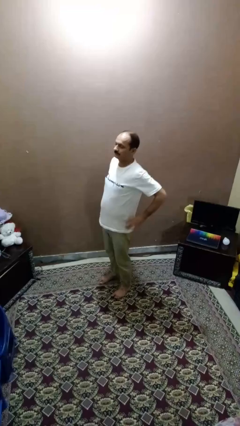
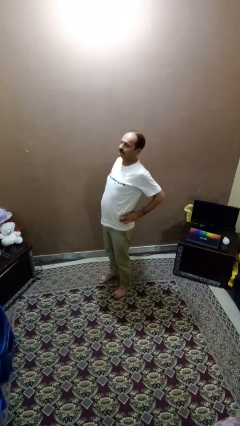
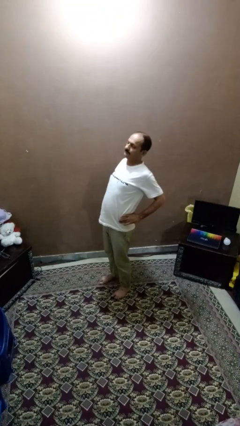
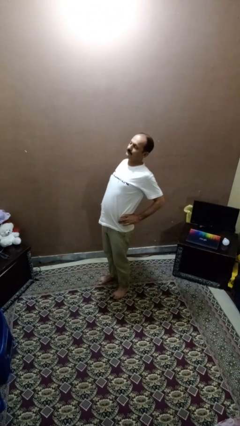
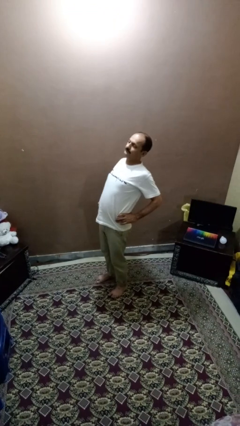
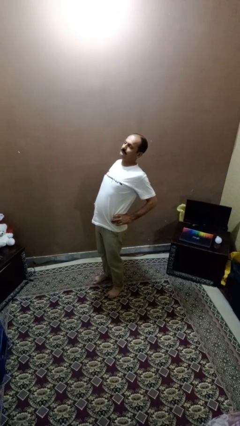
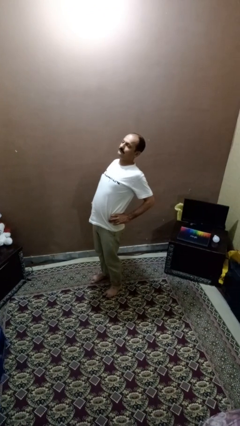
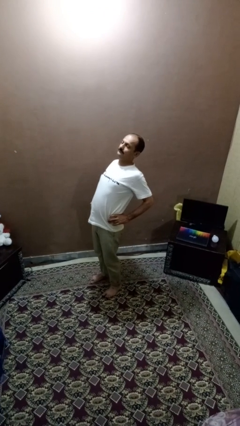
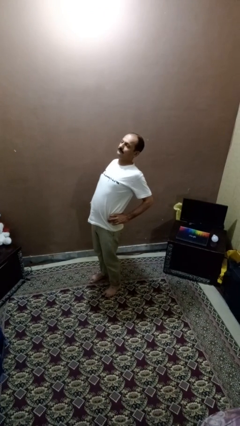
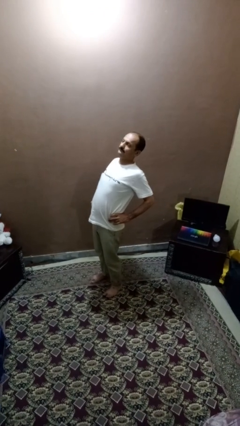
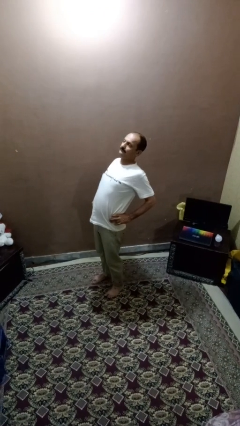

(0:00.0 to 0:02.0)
person stretches back

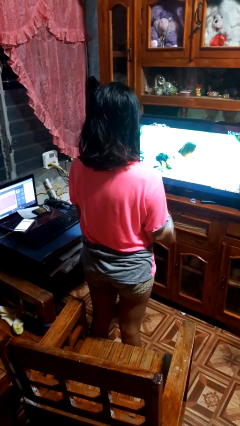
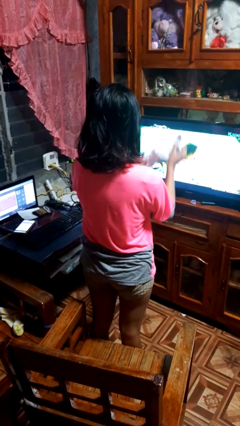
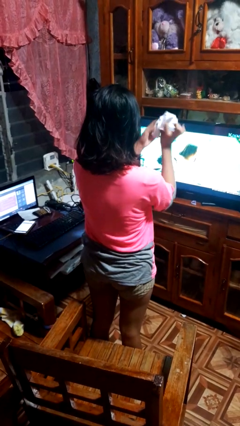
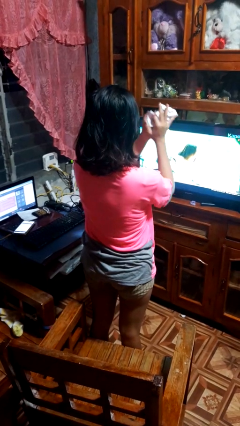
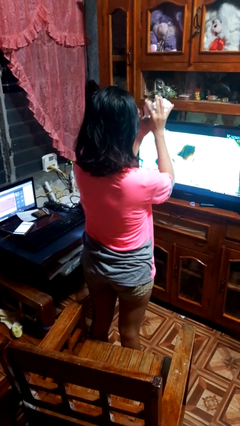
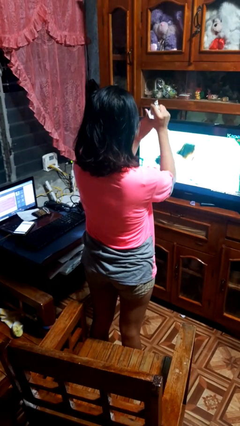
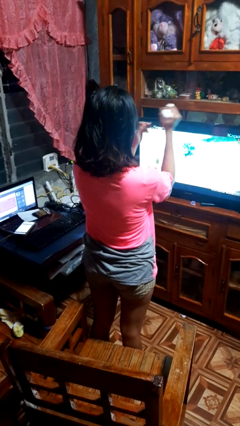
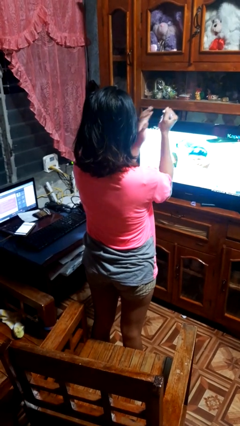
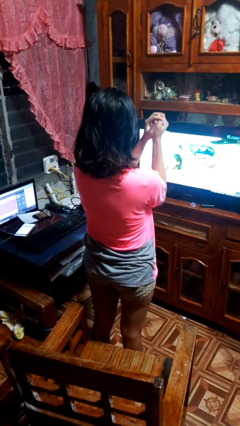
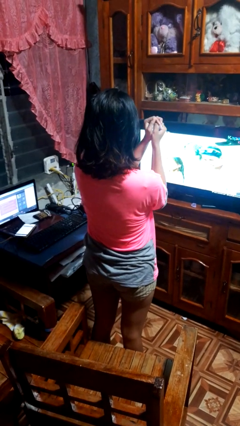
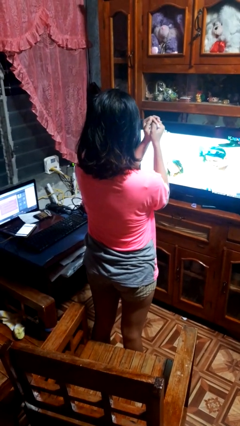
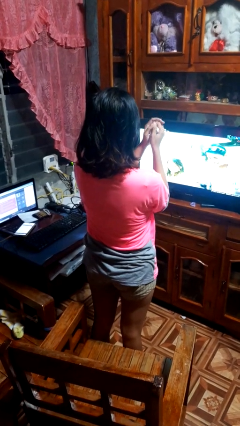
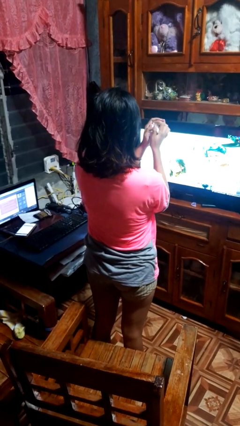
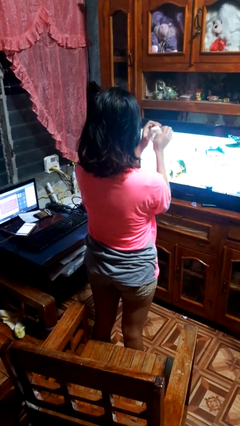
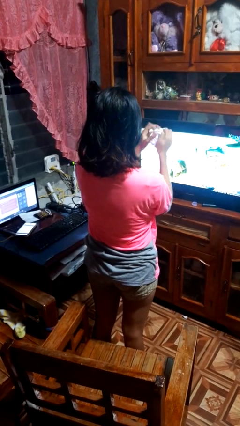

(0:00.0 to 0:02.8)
person crumples paper

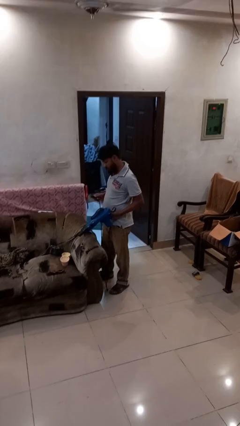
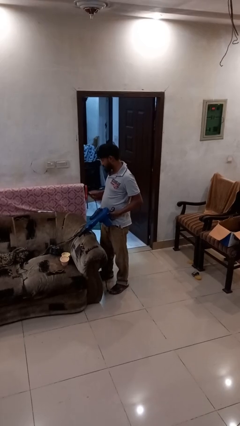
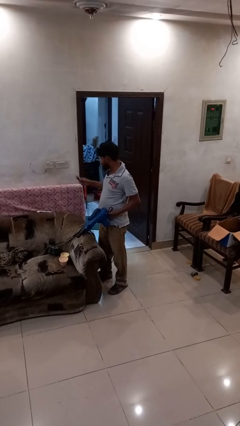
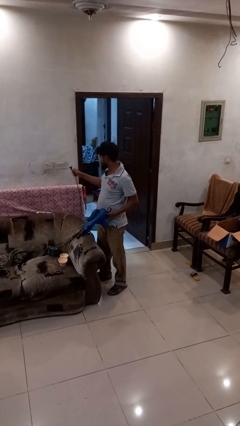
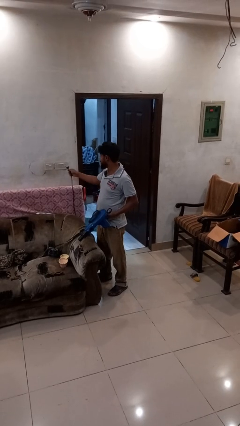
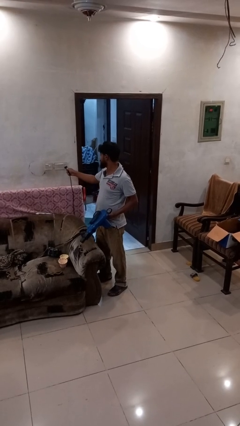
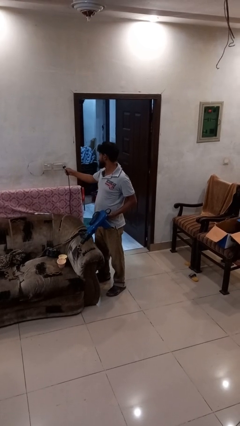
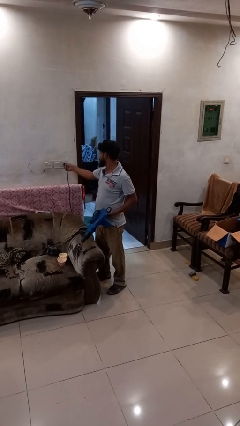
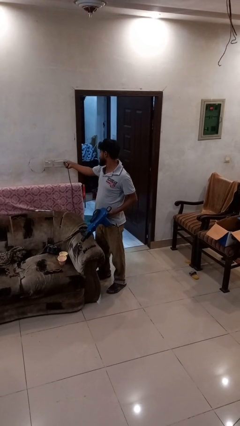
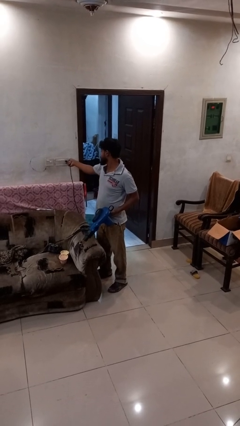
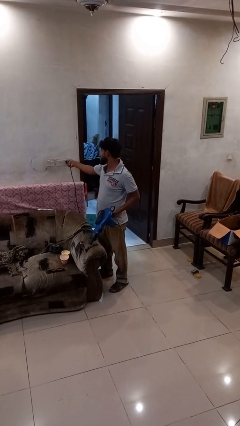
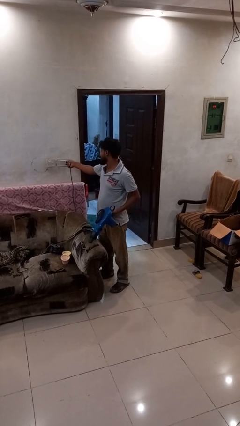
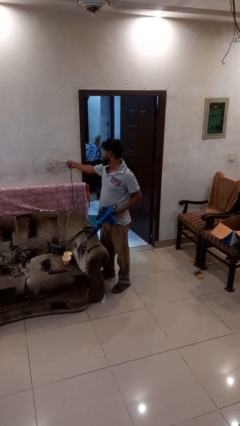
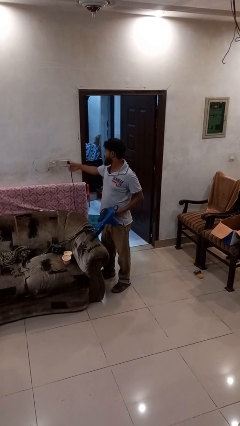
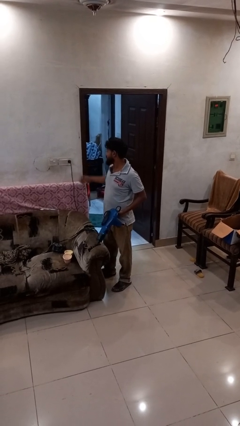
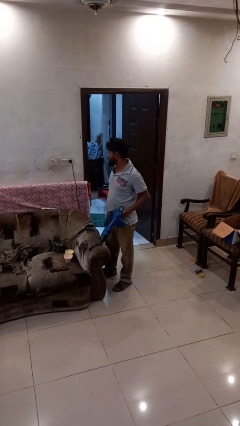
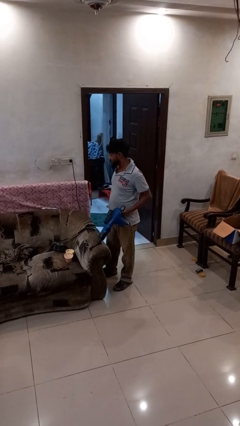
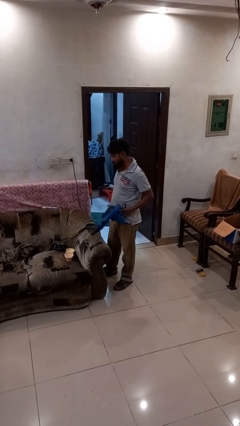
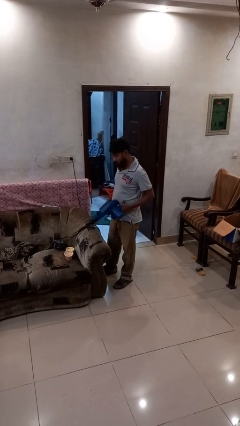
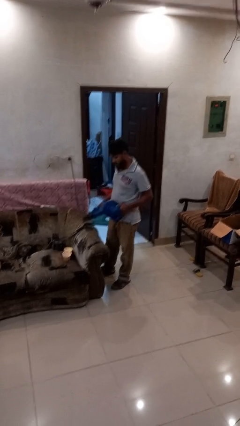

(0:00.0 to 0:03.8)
person plugs into electrical socket

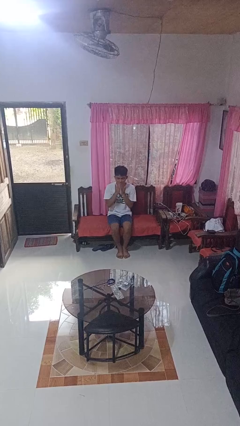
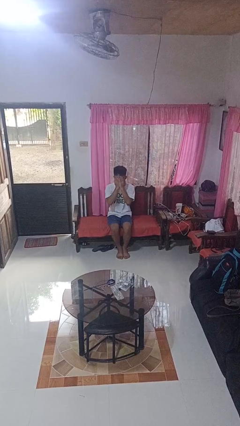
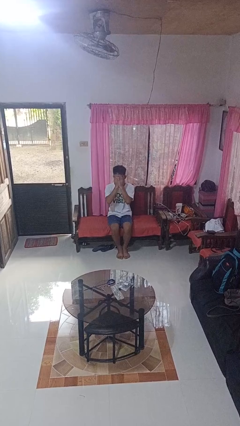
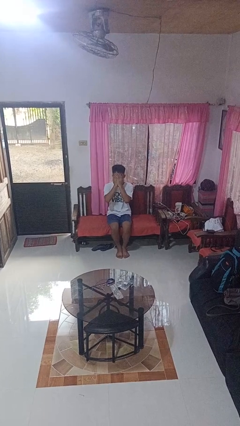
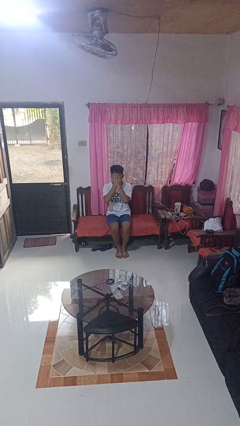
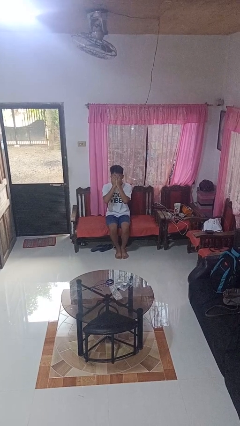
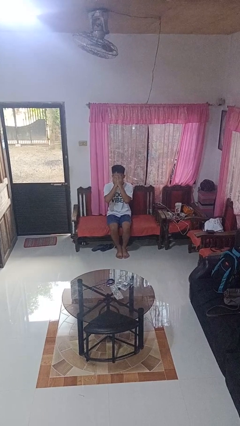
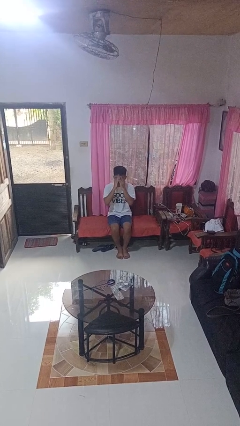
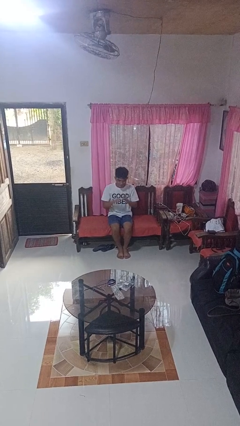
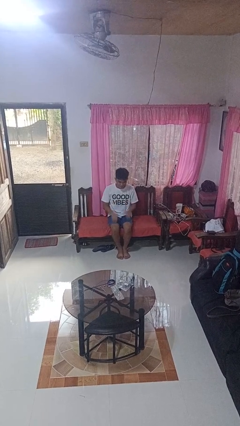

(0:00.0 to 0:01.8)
person covers face with hands

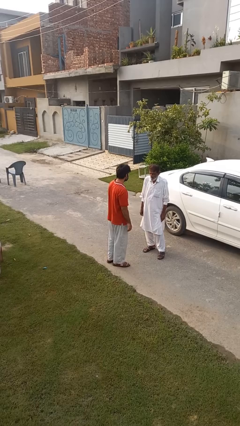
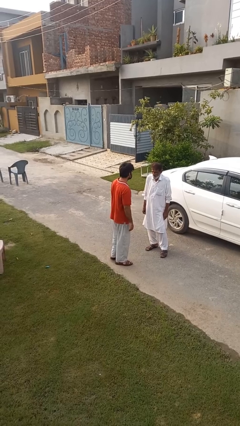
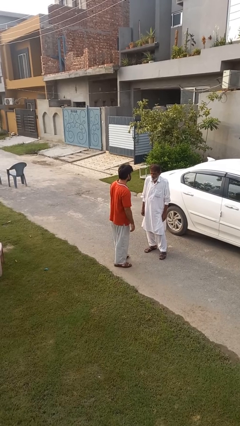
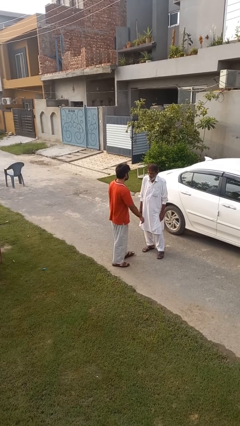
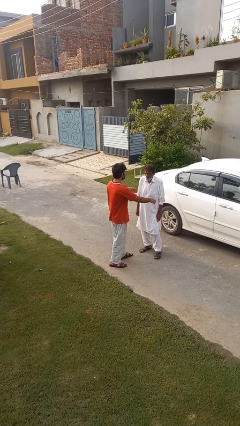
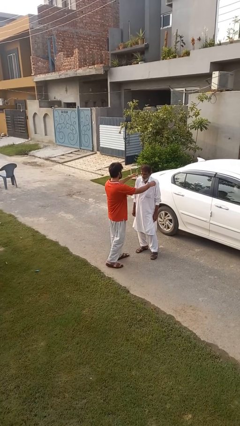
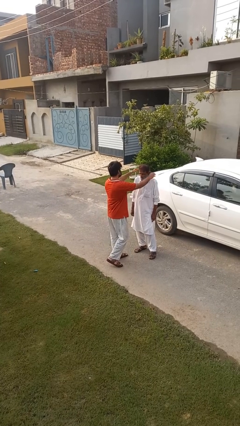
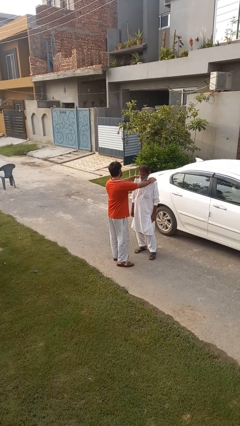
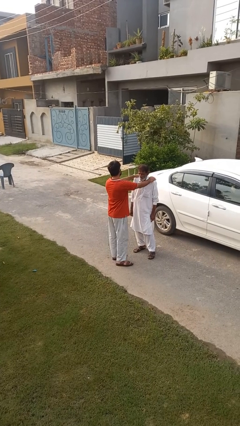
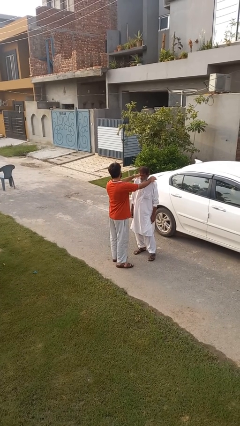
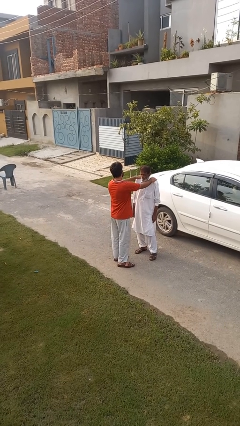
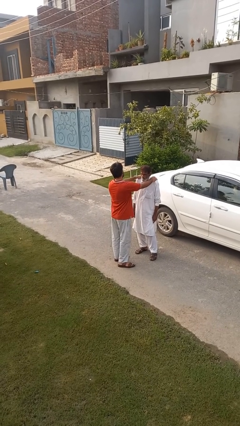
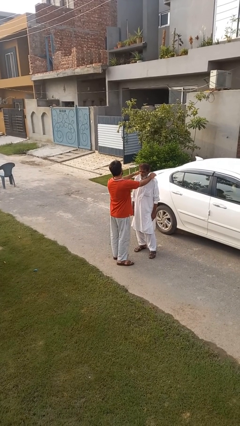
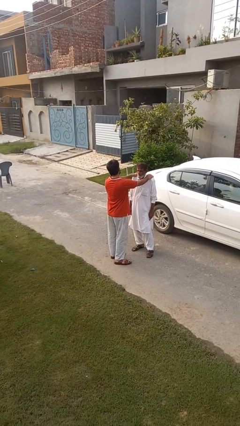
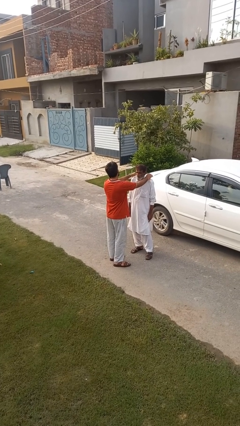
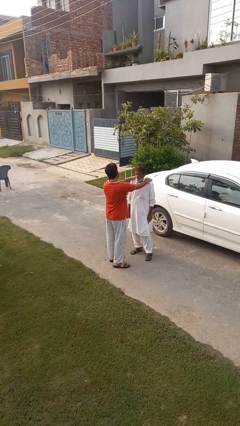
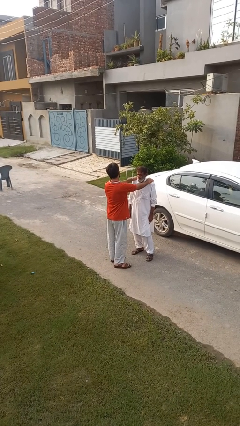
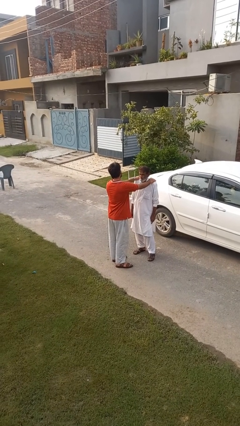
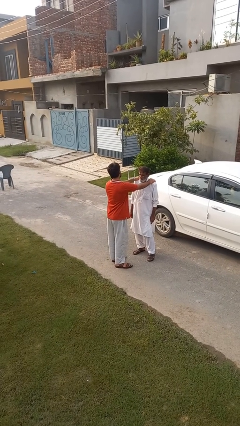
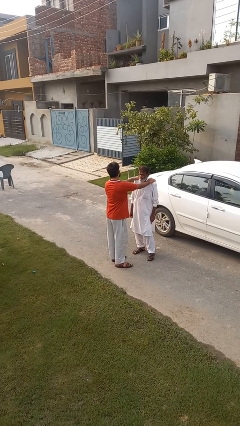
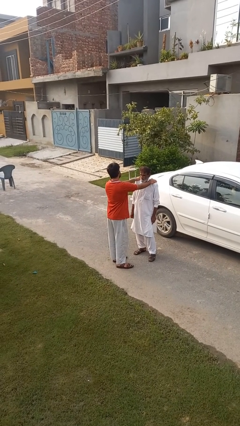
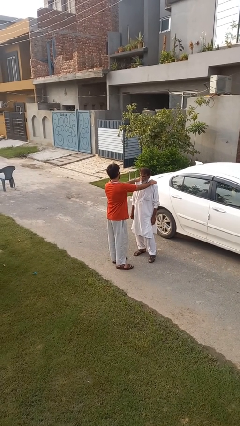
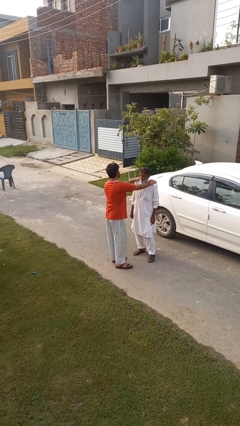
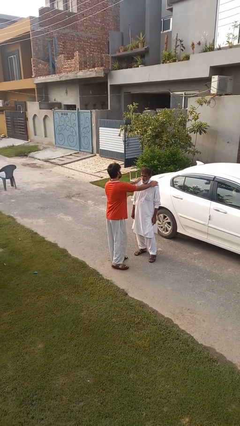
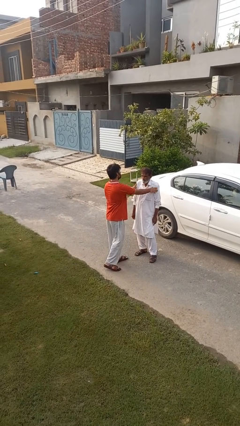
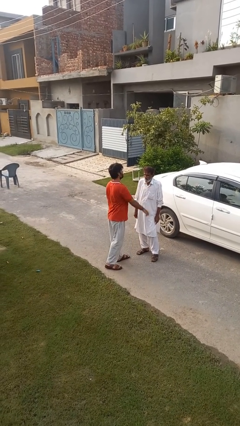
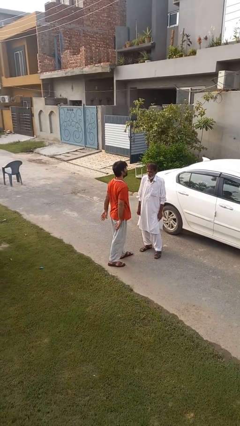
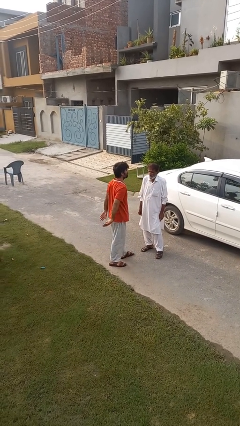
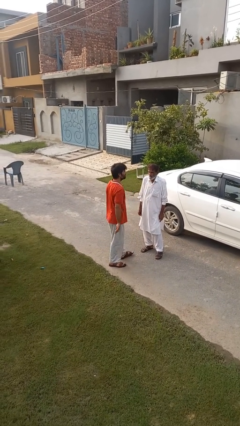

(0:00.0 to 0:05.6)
person pounds shoulders of person

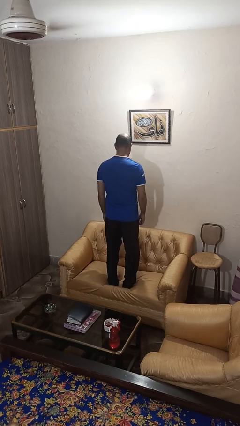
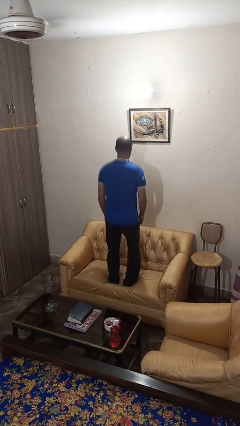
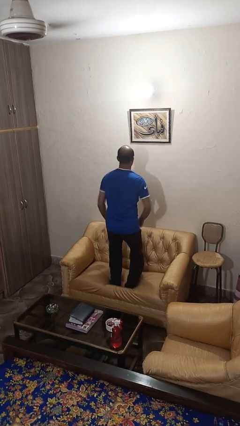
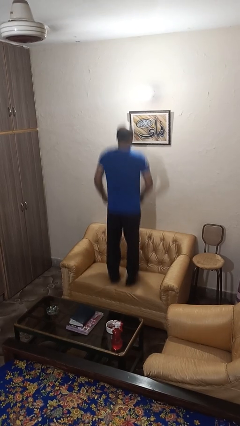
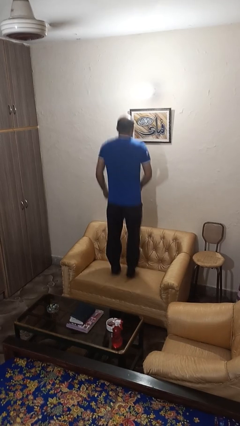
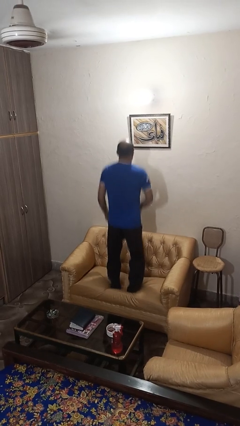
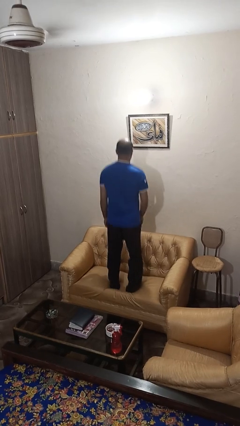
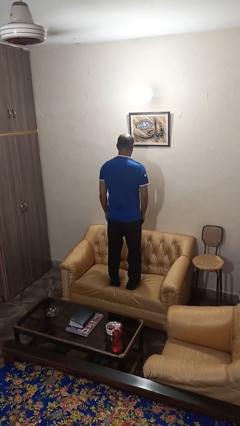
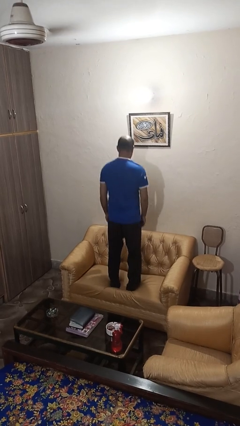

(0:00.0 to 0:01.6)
person jumps on couch
